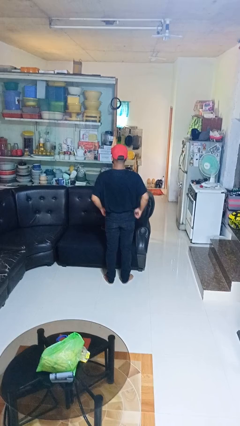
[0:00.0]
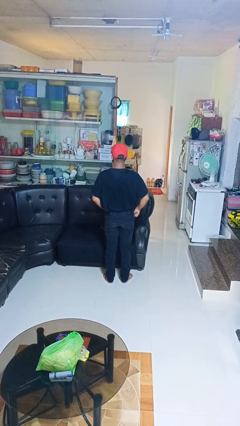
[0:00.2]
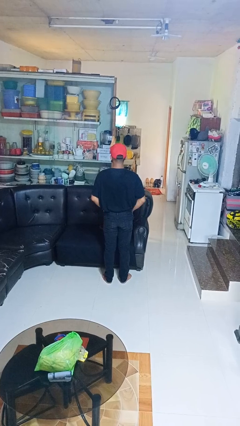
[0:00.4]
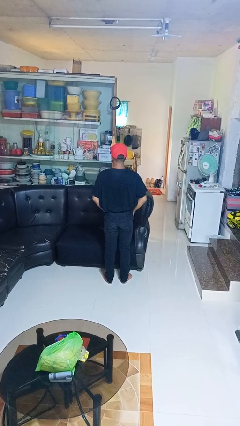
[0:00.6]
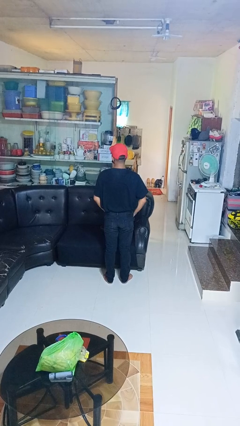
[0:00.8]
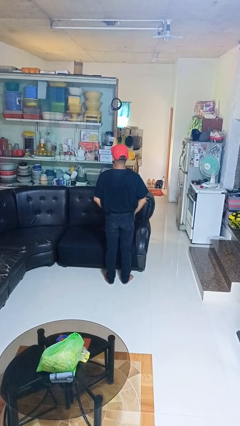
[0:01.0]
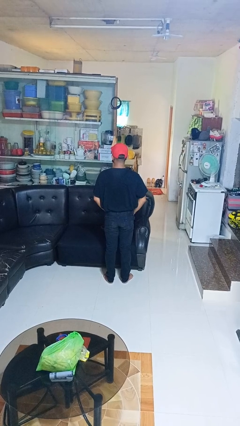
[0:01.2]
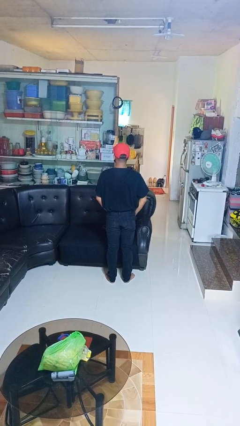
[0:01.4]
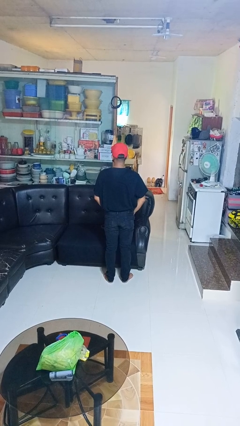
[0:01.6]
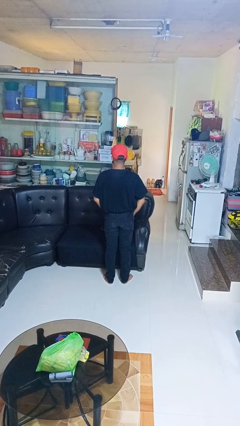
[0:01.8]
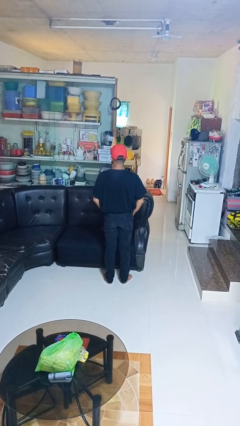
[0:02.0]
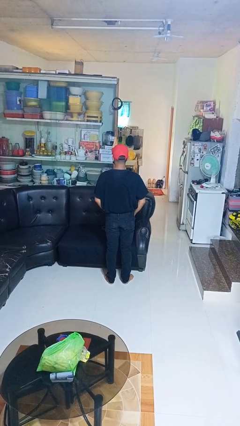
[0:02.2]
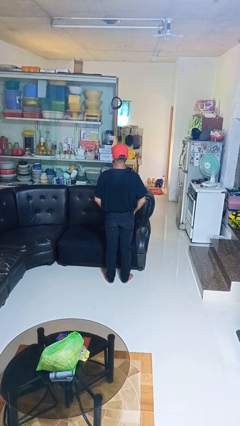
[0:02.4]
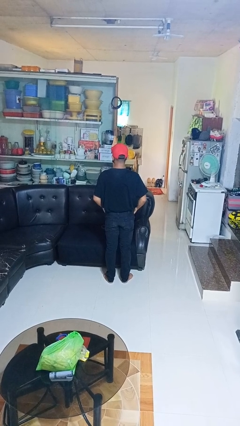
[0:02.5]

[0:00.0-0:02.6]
person puts hands in back pockets

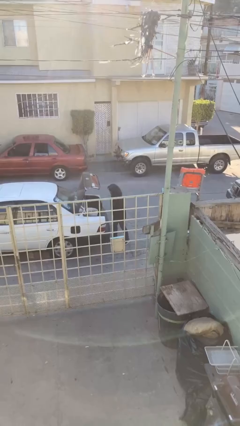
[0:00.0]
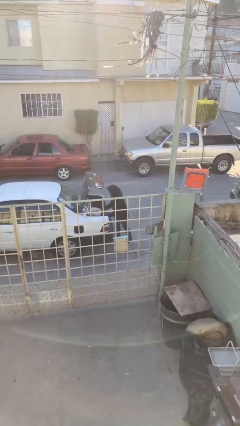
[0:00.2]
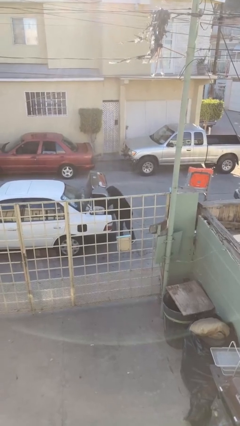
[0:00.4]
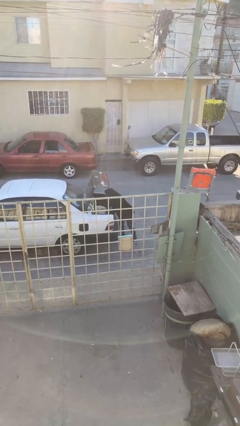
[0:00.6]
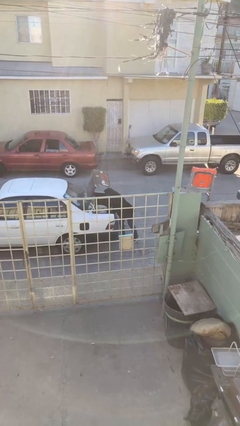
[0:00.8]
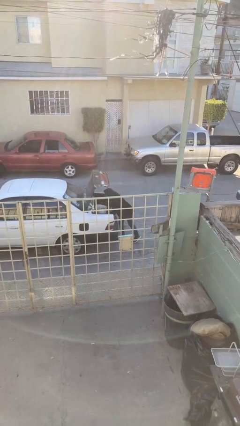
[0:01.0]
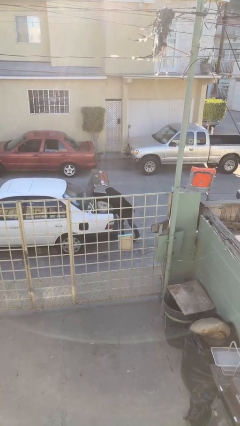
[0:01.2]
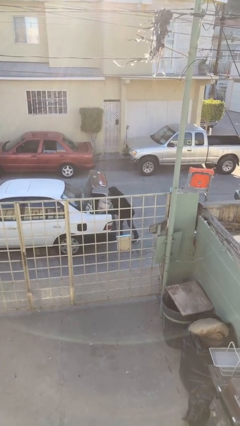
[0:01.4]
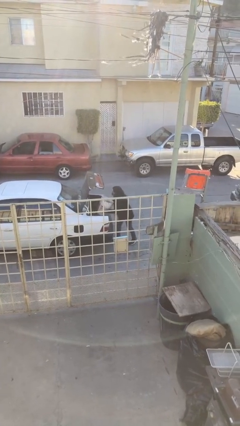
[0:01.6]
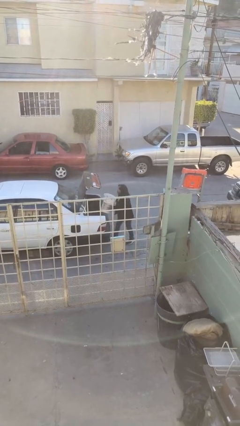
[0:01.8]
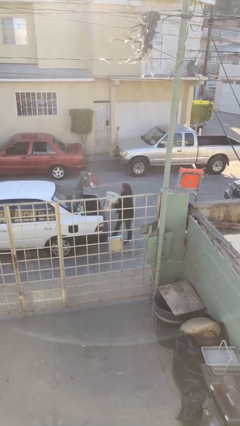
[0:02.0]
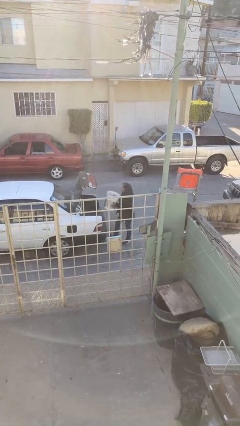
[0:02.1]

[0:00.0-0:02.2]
person unloads car

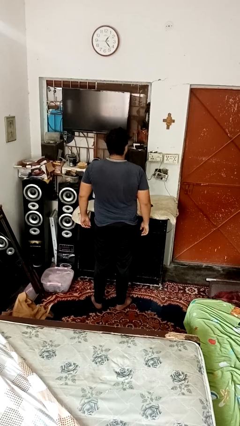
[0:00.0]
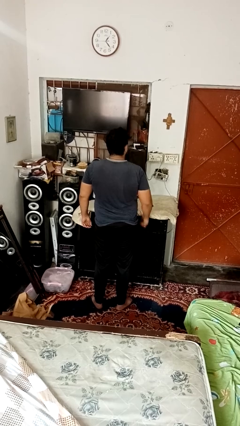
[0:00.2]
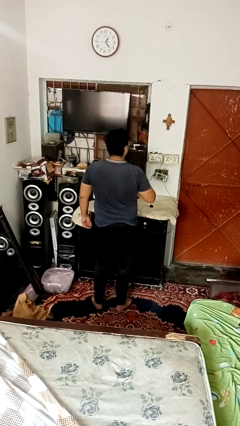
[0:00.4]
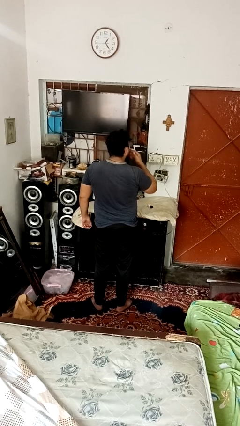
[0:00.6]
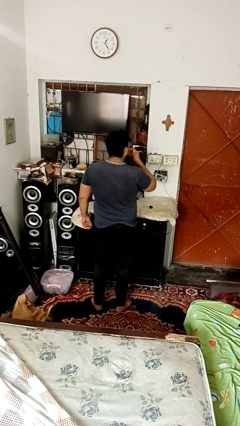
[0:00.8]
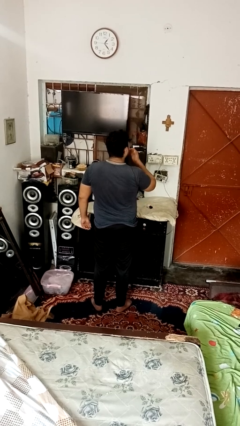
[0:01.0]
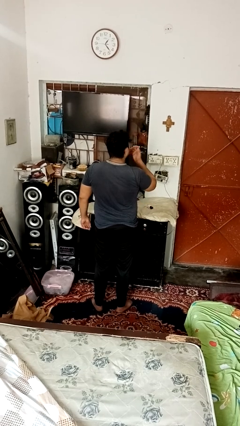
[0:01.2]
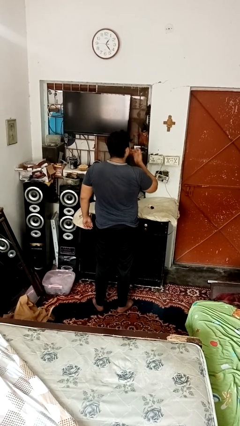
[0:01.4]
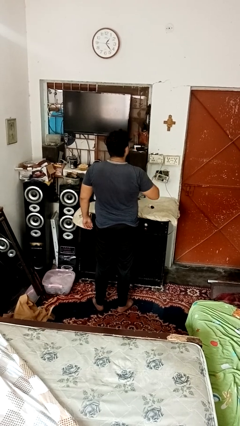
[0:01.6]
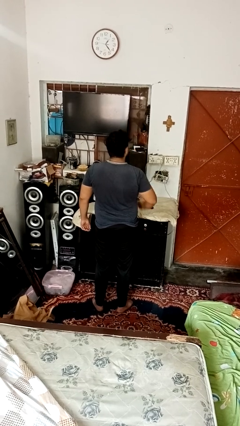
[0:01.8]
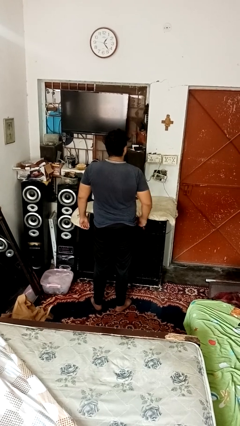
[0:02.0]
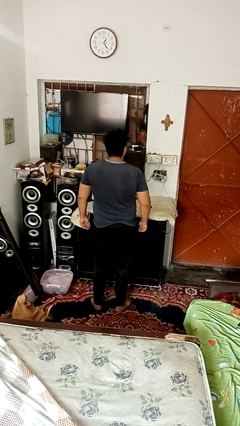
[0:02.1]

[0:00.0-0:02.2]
person licks fingers

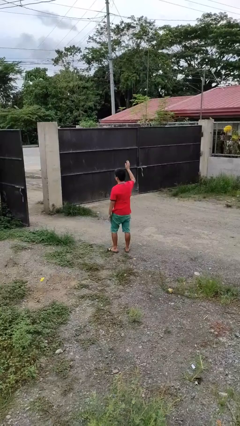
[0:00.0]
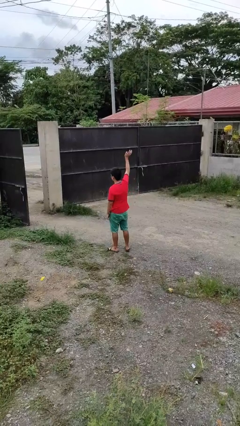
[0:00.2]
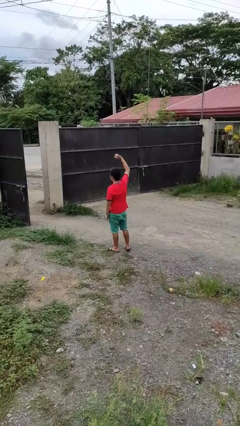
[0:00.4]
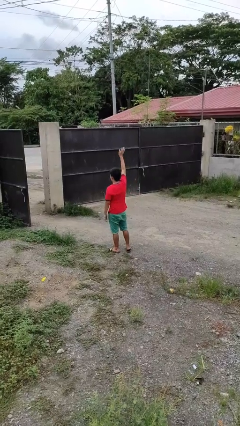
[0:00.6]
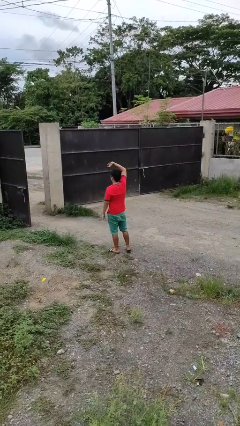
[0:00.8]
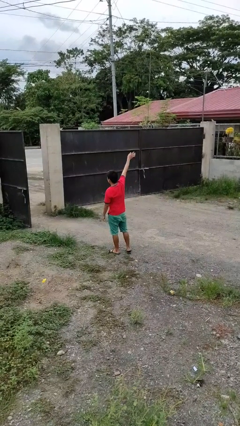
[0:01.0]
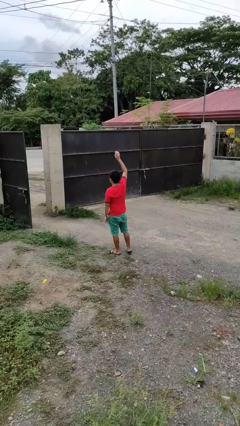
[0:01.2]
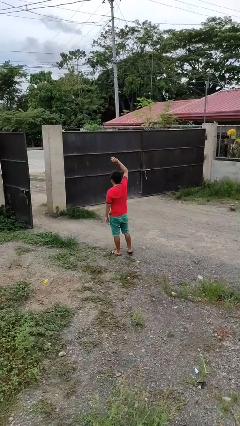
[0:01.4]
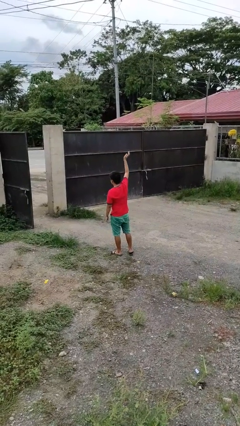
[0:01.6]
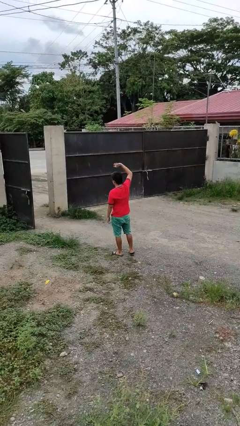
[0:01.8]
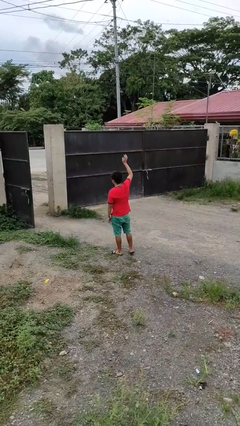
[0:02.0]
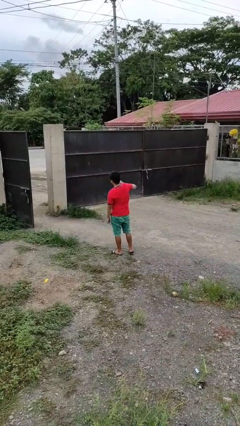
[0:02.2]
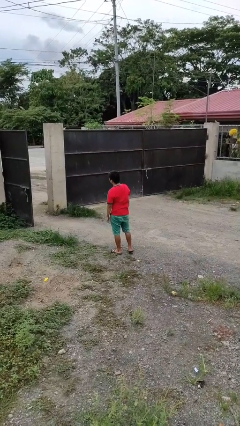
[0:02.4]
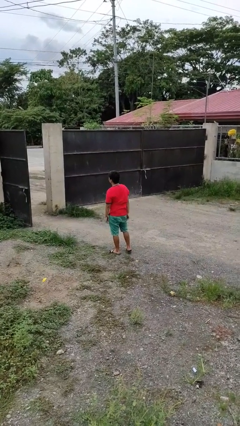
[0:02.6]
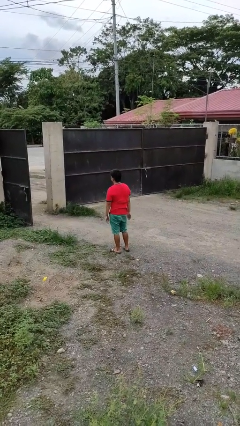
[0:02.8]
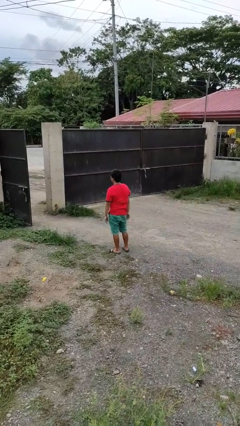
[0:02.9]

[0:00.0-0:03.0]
person waves at person

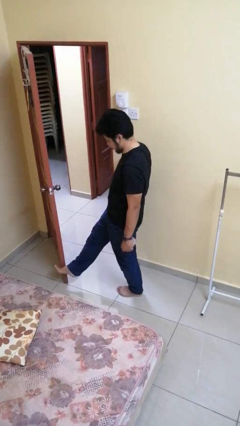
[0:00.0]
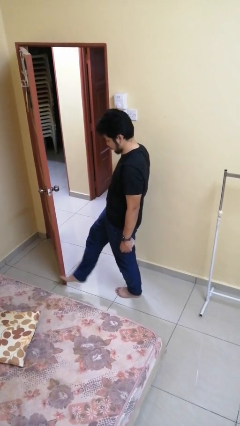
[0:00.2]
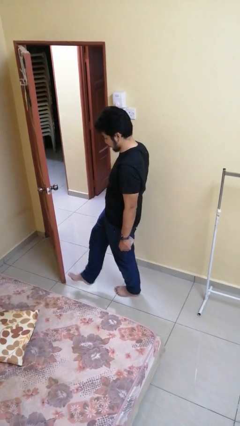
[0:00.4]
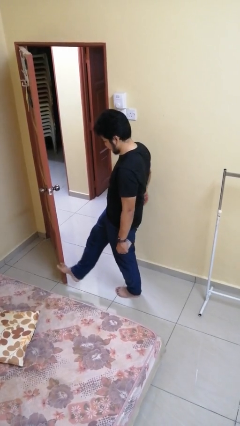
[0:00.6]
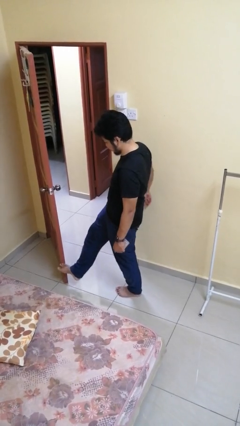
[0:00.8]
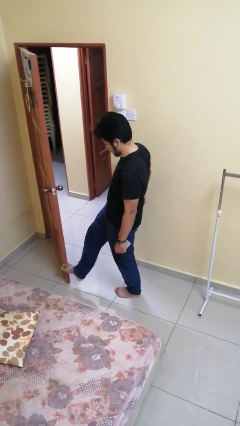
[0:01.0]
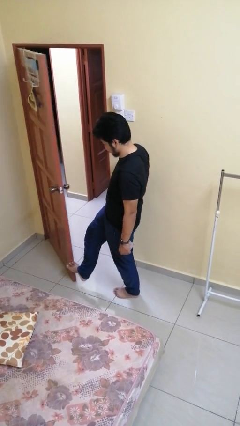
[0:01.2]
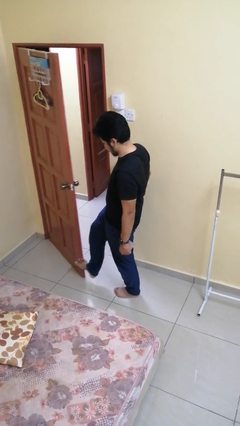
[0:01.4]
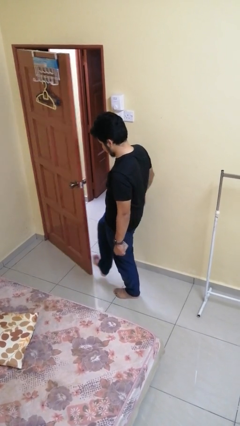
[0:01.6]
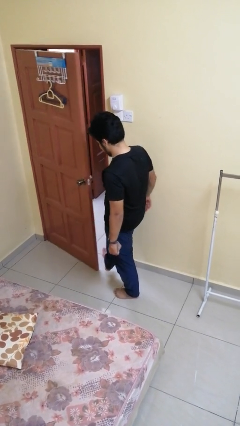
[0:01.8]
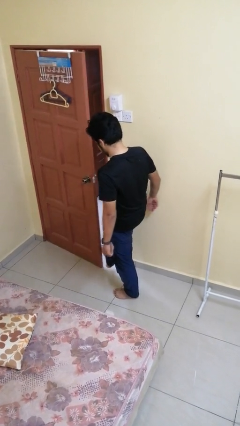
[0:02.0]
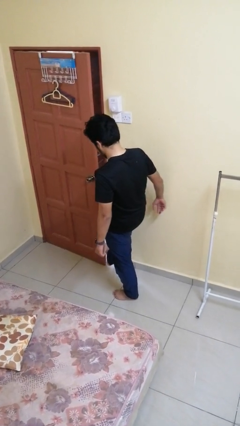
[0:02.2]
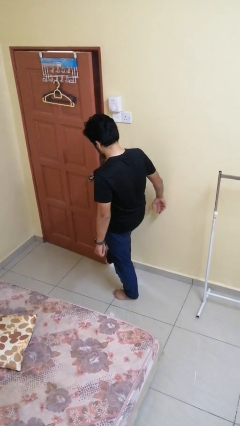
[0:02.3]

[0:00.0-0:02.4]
person closes door with foot

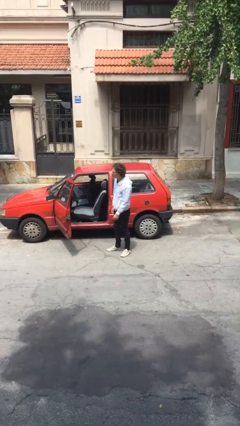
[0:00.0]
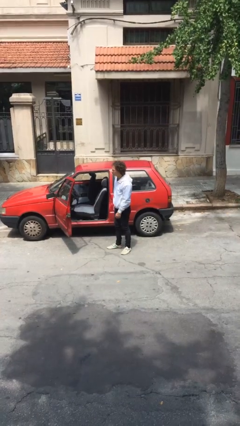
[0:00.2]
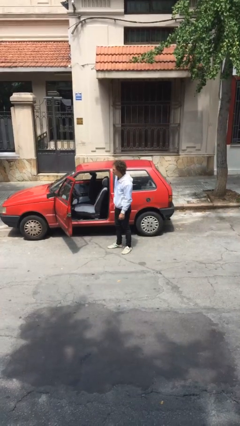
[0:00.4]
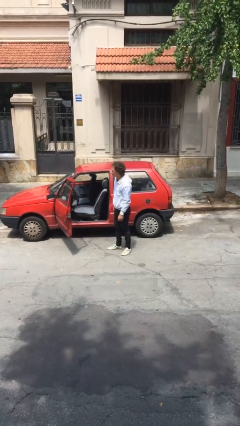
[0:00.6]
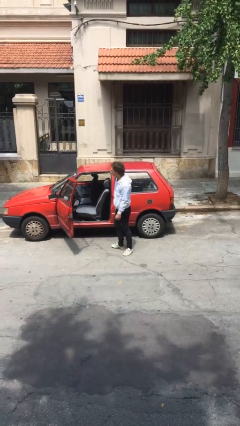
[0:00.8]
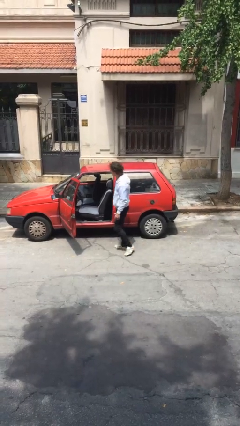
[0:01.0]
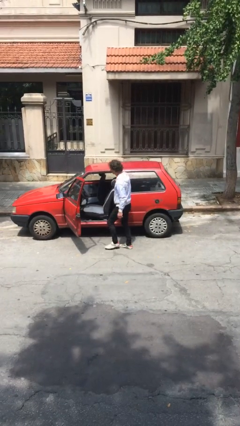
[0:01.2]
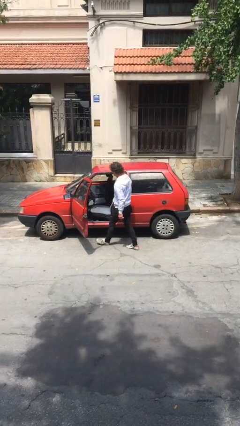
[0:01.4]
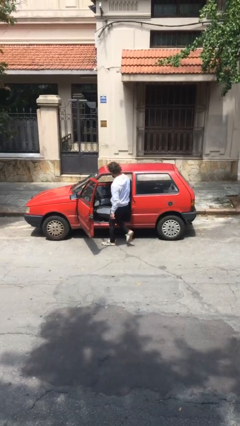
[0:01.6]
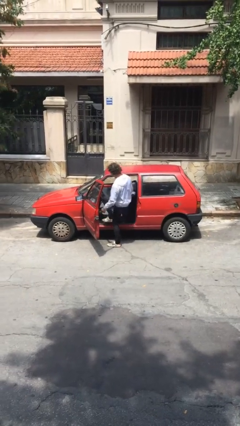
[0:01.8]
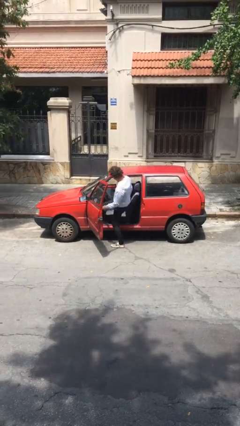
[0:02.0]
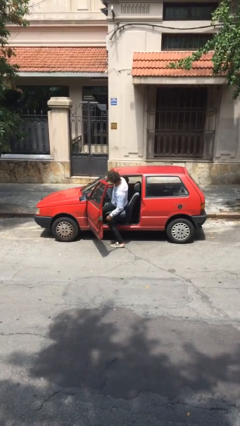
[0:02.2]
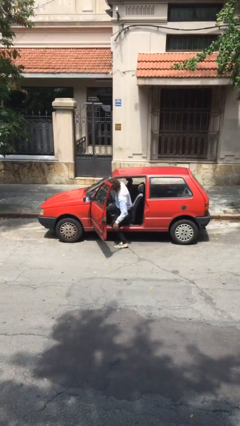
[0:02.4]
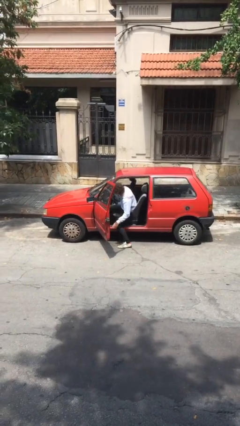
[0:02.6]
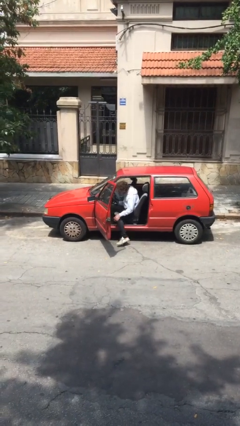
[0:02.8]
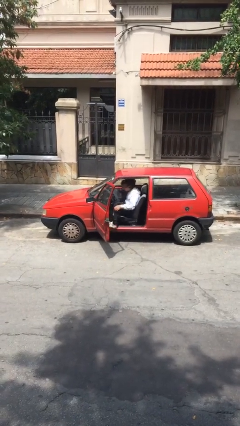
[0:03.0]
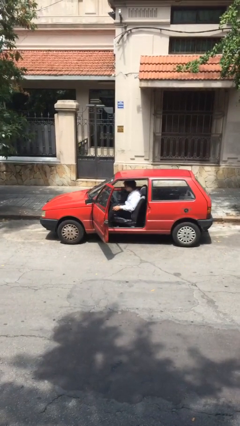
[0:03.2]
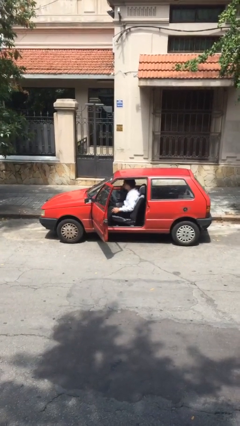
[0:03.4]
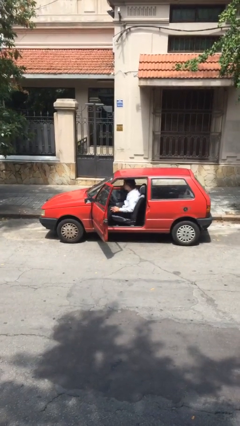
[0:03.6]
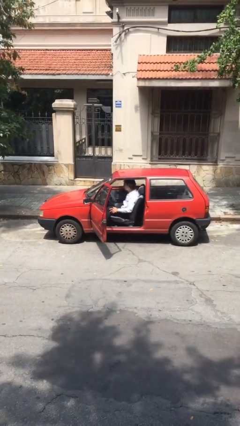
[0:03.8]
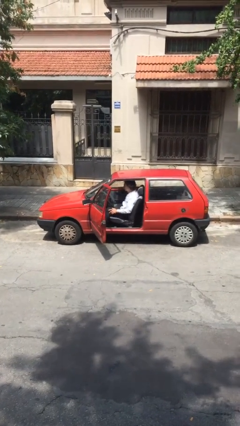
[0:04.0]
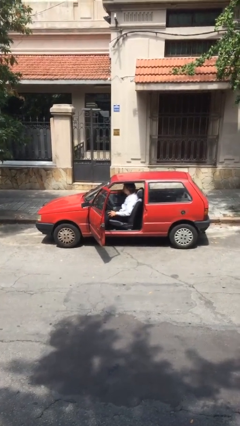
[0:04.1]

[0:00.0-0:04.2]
person enters car

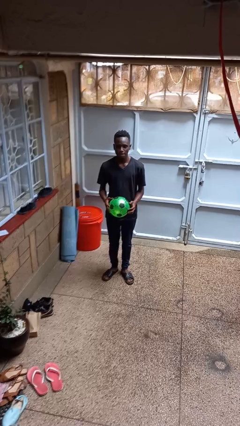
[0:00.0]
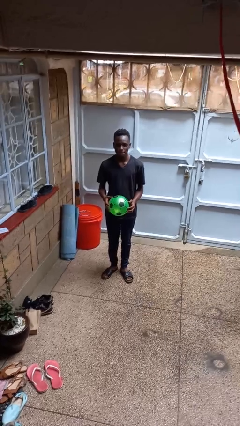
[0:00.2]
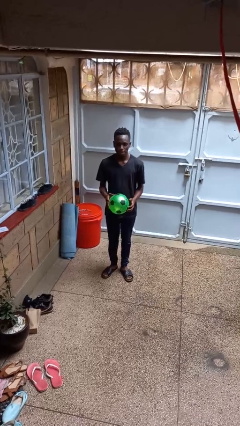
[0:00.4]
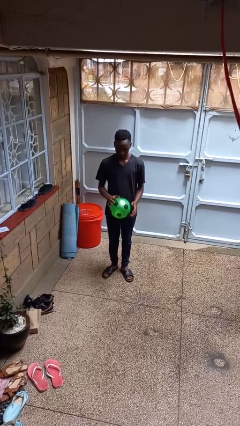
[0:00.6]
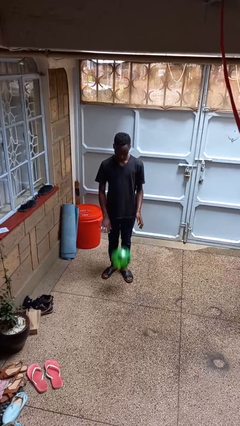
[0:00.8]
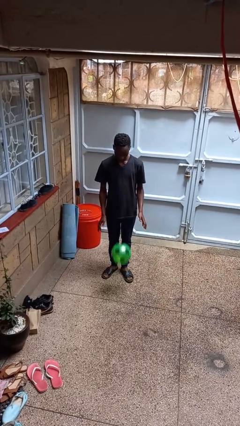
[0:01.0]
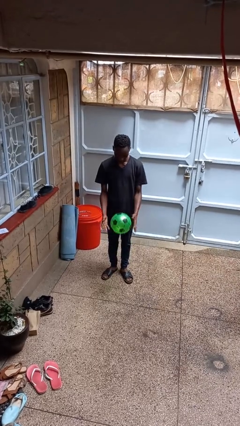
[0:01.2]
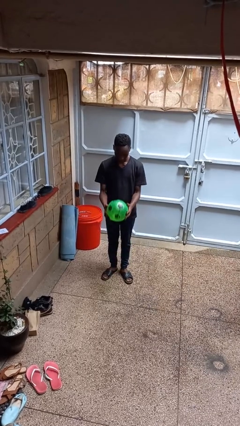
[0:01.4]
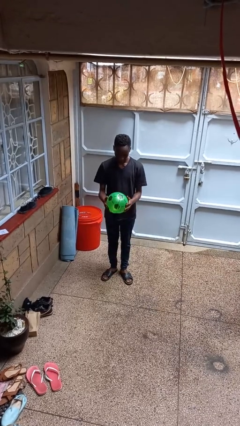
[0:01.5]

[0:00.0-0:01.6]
person bounces ball on floor
